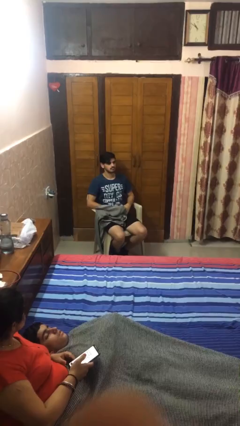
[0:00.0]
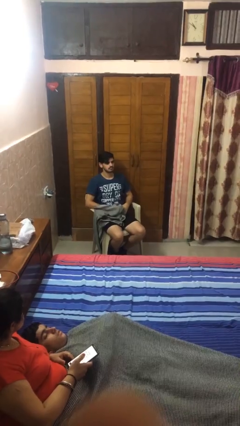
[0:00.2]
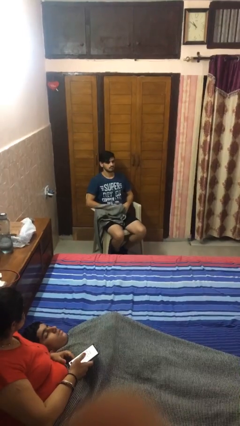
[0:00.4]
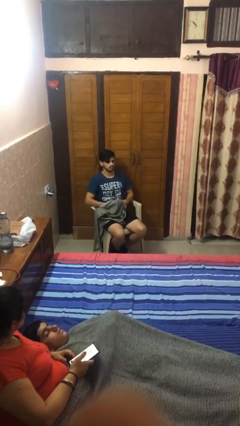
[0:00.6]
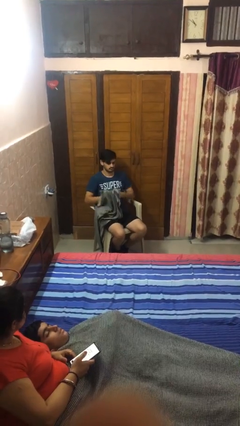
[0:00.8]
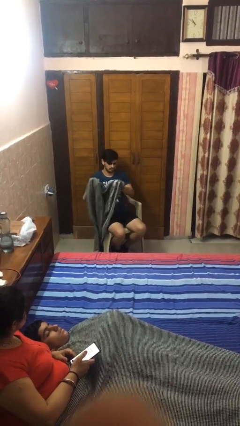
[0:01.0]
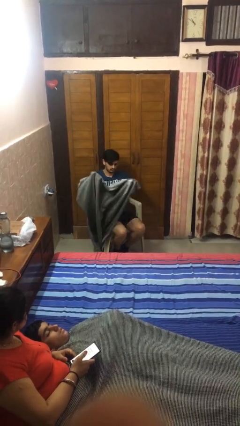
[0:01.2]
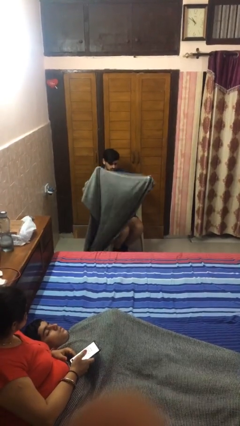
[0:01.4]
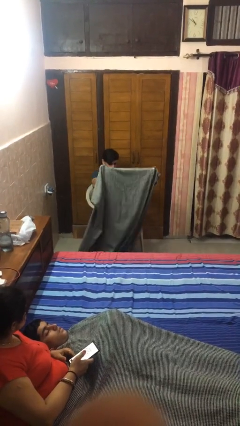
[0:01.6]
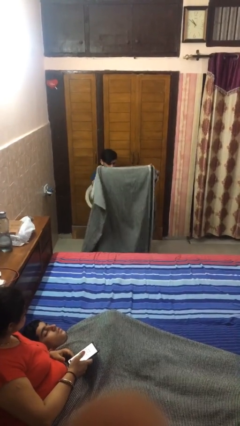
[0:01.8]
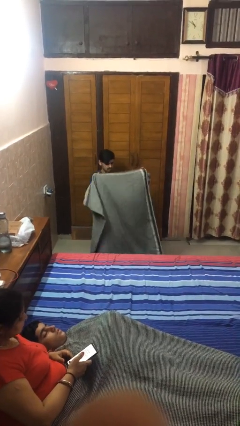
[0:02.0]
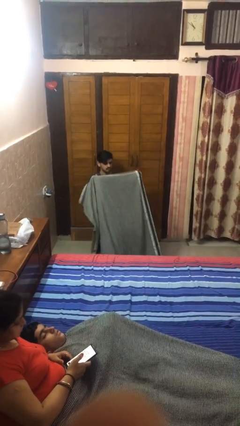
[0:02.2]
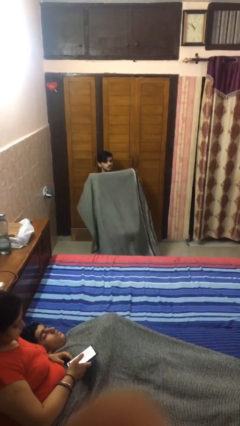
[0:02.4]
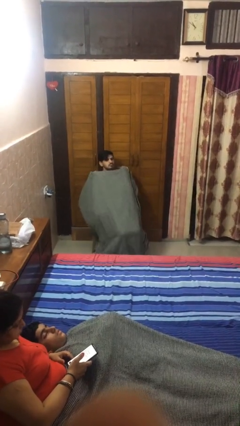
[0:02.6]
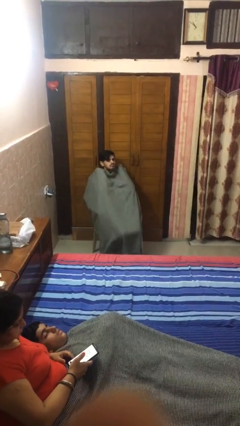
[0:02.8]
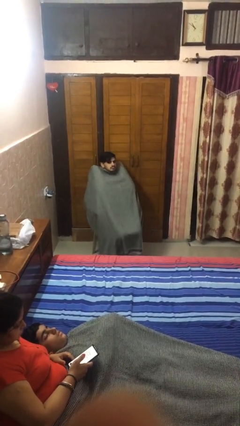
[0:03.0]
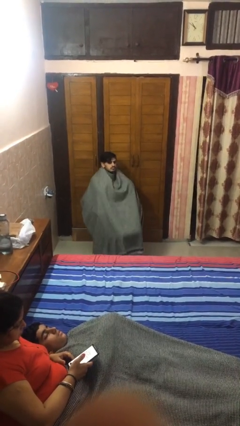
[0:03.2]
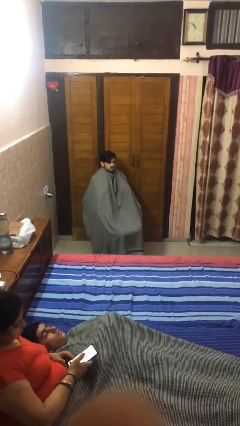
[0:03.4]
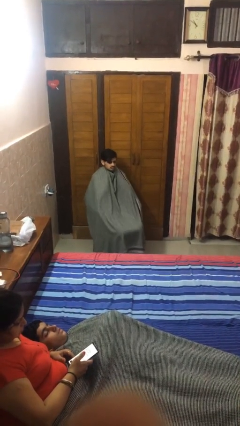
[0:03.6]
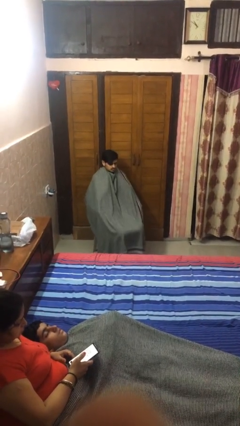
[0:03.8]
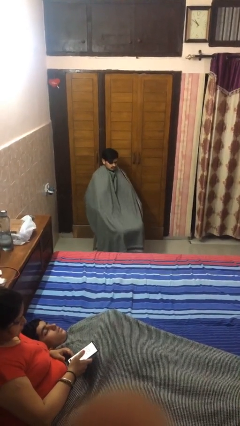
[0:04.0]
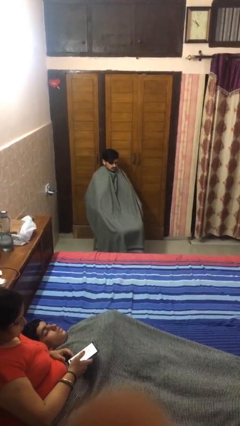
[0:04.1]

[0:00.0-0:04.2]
person covers with blanket

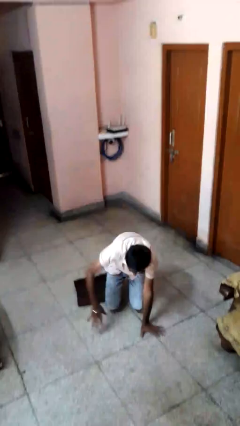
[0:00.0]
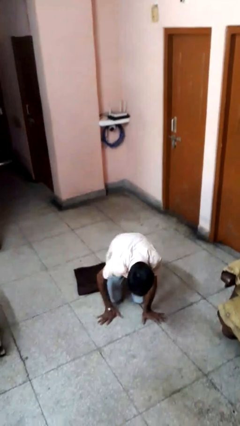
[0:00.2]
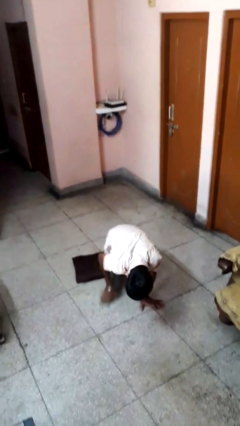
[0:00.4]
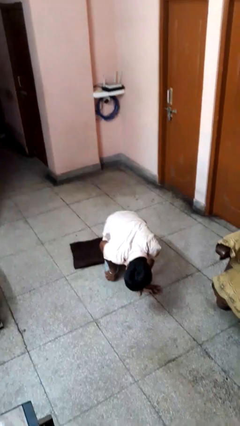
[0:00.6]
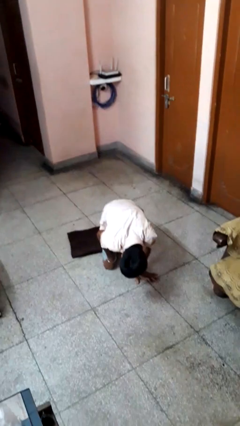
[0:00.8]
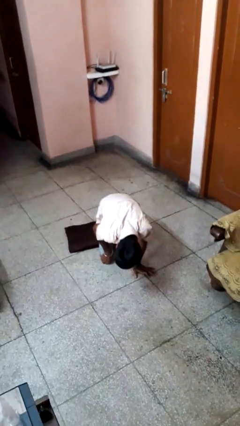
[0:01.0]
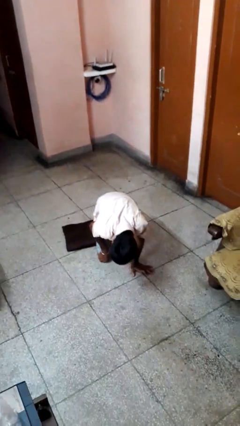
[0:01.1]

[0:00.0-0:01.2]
person trips on object on floor

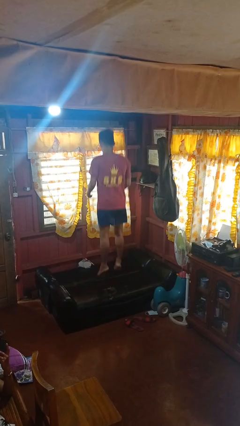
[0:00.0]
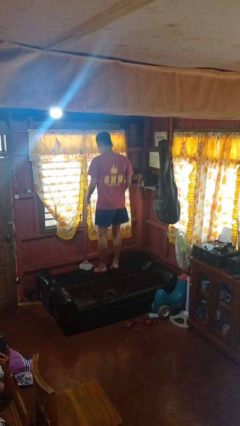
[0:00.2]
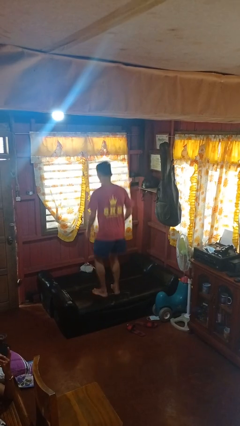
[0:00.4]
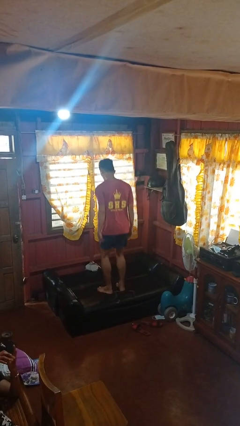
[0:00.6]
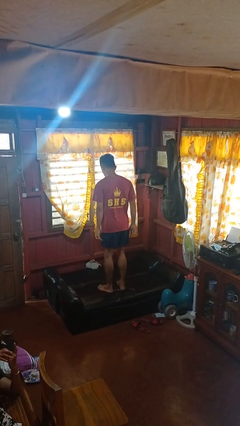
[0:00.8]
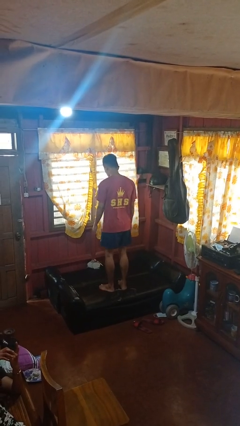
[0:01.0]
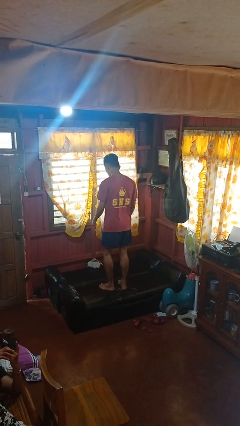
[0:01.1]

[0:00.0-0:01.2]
person jumps on couch

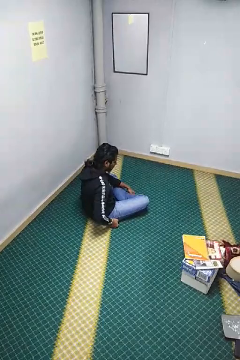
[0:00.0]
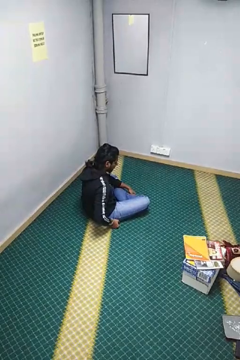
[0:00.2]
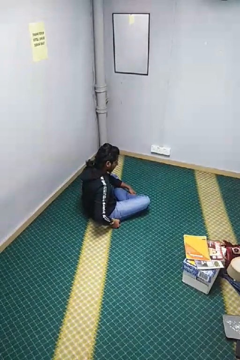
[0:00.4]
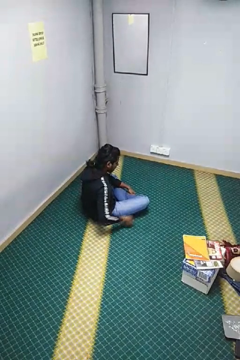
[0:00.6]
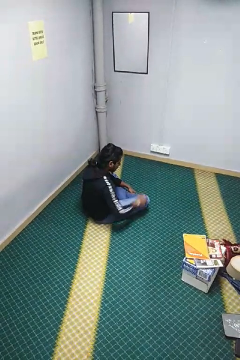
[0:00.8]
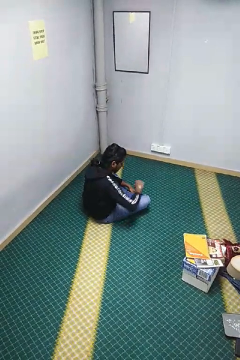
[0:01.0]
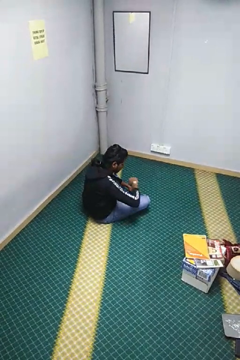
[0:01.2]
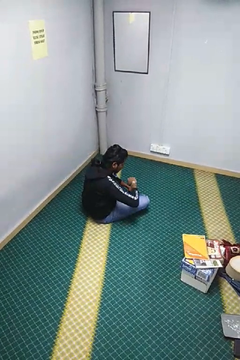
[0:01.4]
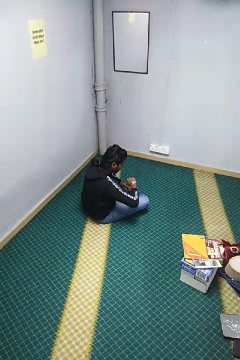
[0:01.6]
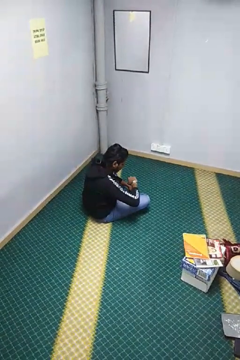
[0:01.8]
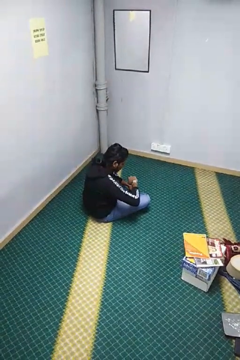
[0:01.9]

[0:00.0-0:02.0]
person looks at wristwatch

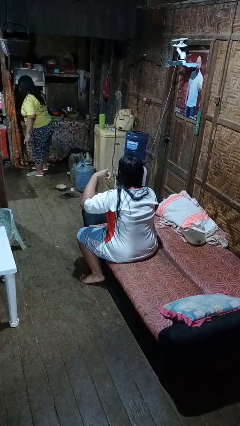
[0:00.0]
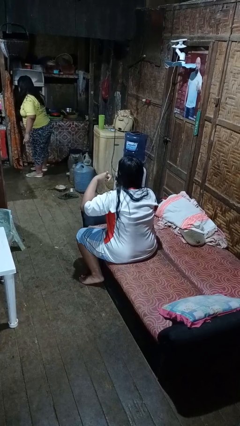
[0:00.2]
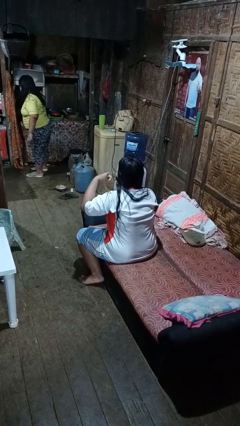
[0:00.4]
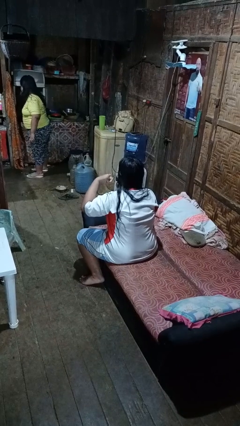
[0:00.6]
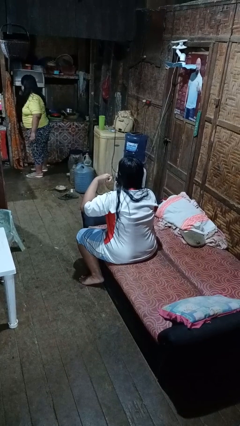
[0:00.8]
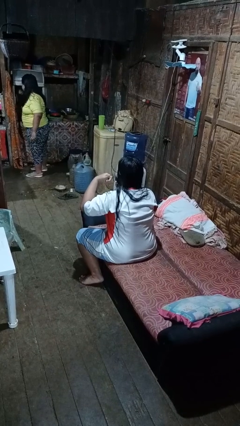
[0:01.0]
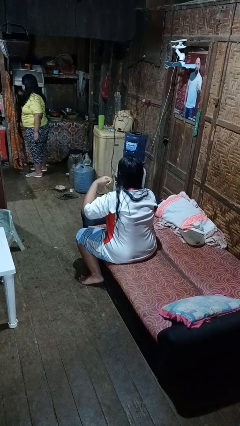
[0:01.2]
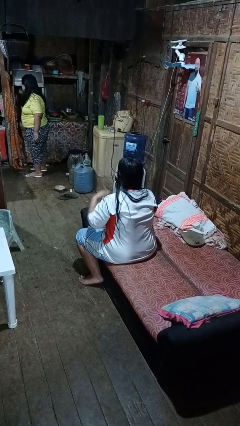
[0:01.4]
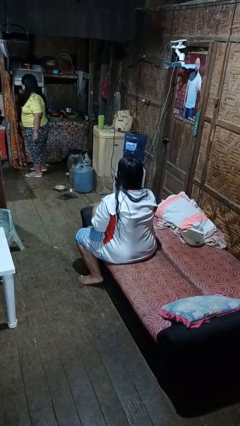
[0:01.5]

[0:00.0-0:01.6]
person gestures call me

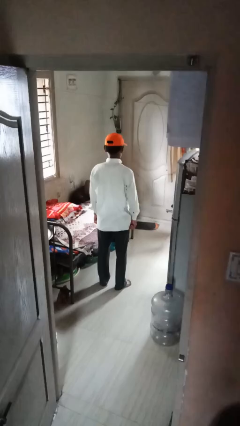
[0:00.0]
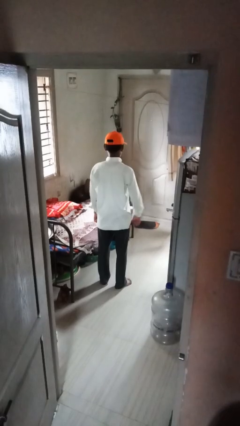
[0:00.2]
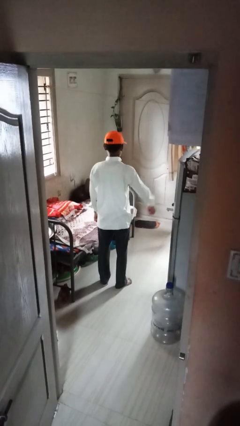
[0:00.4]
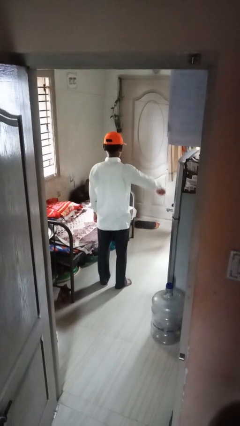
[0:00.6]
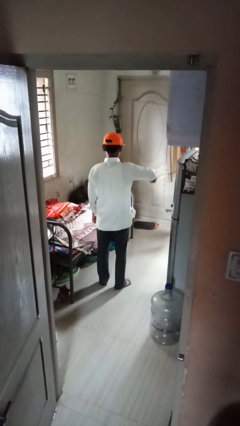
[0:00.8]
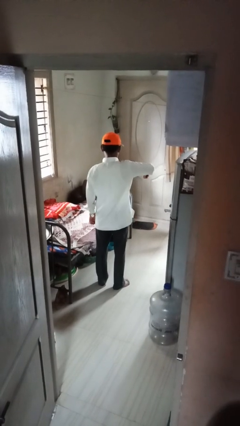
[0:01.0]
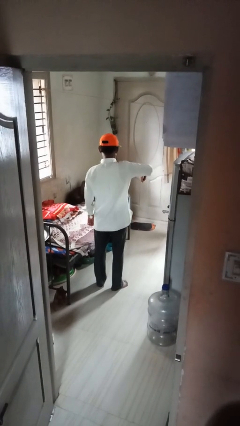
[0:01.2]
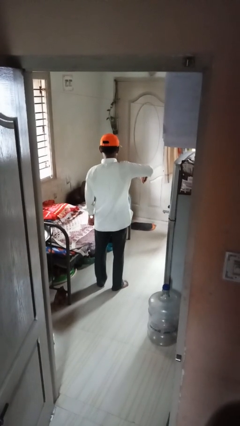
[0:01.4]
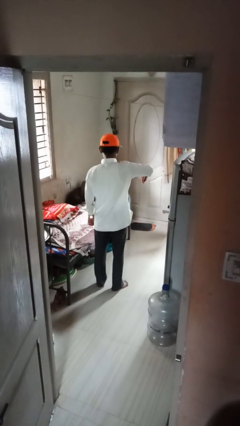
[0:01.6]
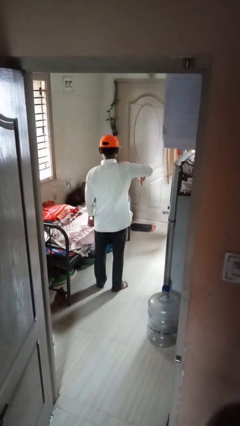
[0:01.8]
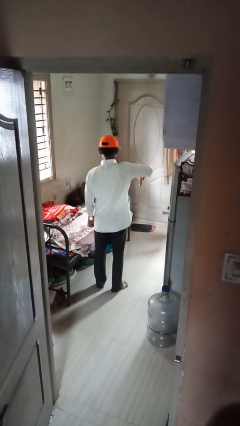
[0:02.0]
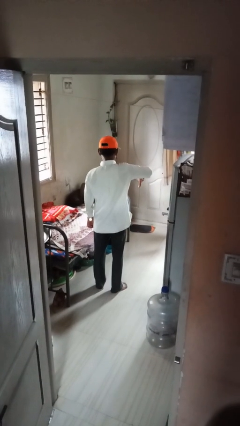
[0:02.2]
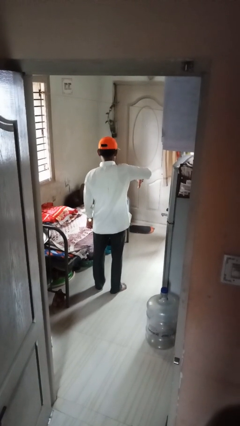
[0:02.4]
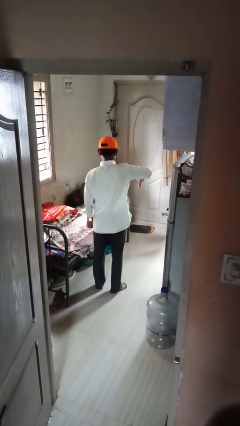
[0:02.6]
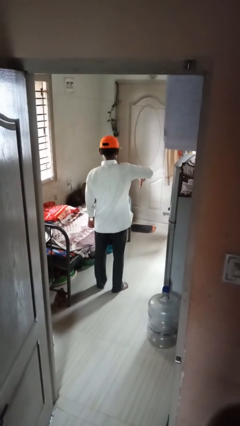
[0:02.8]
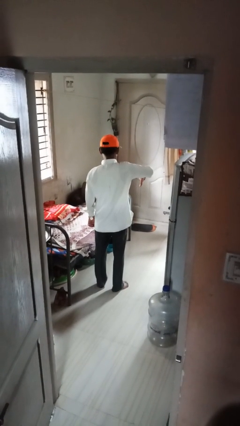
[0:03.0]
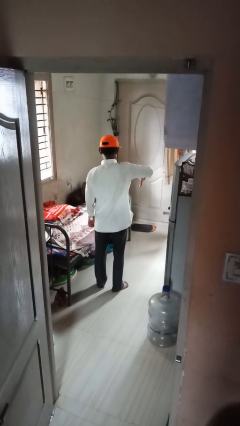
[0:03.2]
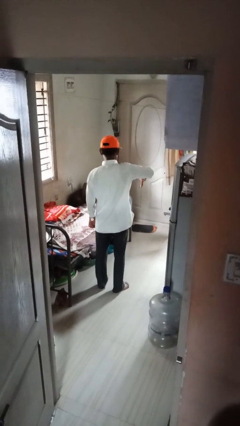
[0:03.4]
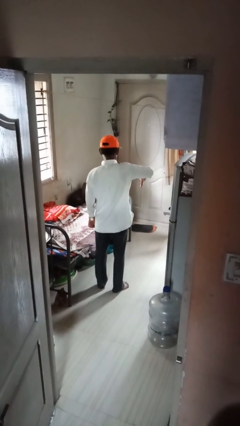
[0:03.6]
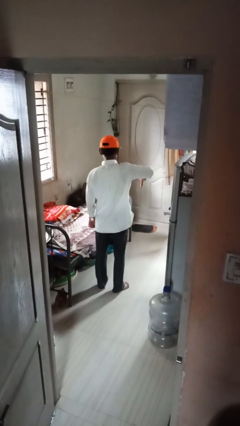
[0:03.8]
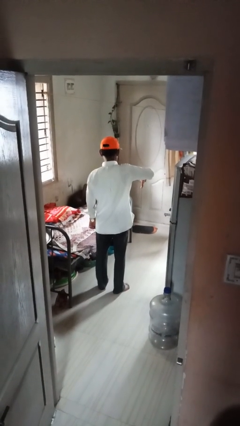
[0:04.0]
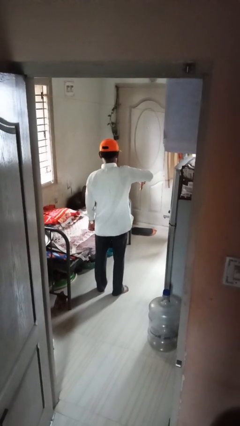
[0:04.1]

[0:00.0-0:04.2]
person gestures thumbs down

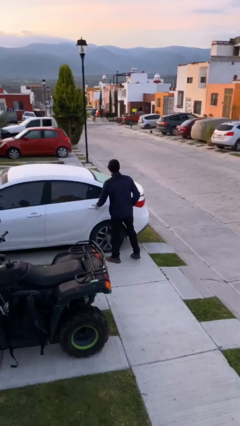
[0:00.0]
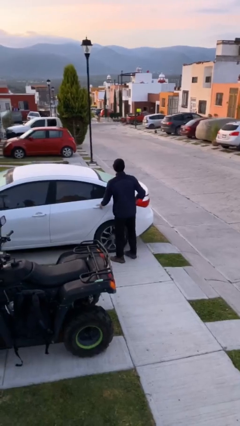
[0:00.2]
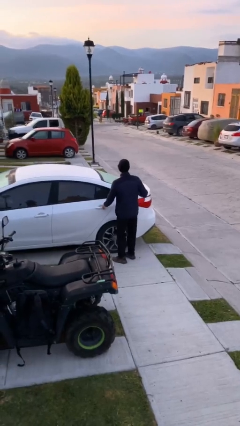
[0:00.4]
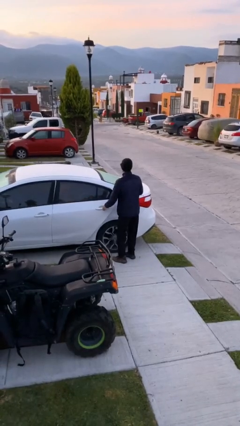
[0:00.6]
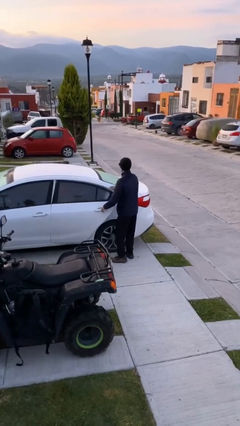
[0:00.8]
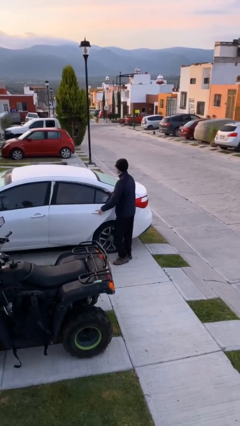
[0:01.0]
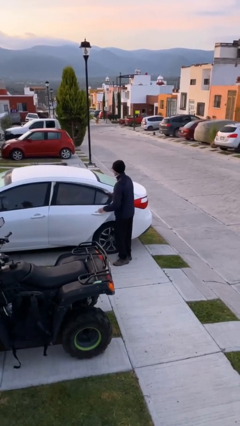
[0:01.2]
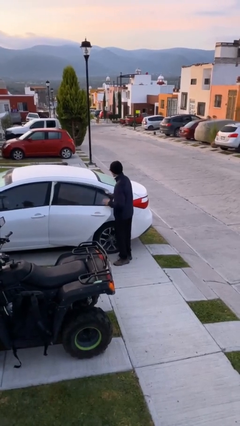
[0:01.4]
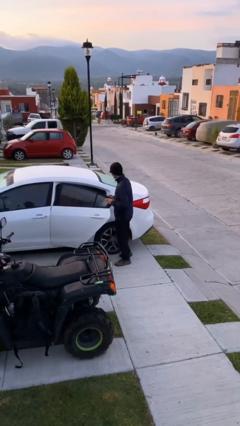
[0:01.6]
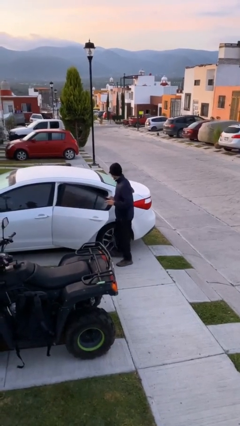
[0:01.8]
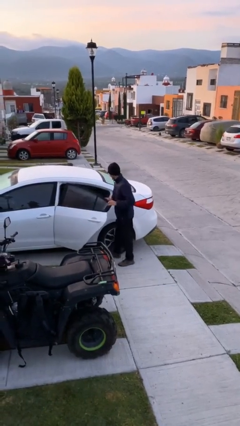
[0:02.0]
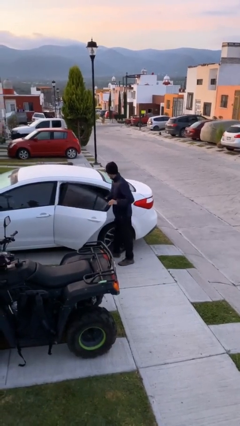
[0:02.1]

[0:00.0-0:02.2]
person opens car door

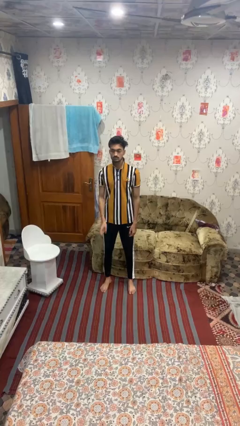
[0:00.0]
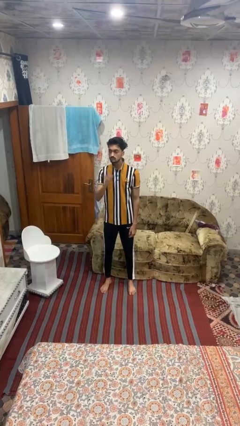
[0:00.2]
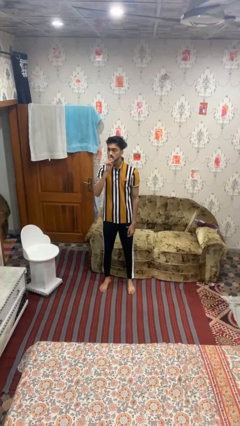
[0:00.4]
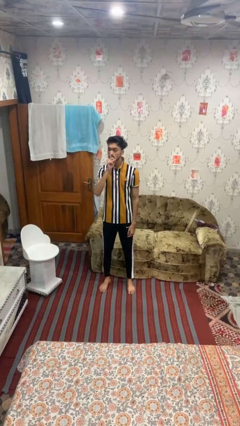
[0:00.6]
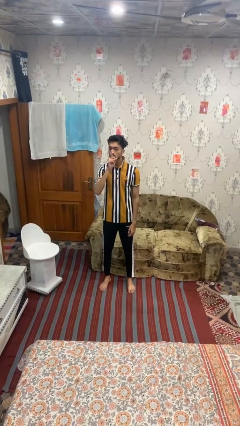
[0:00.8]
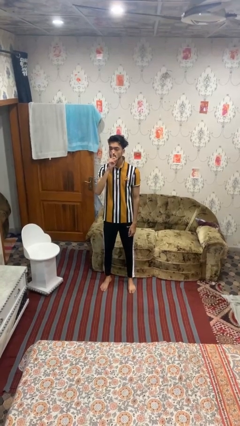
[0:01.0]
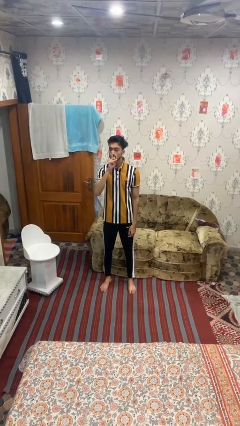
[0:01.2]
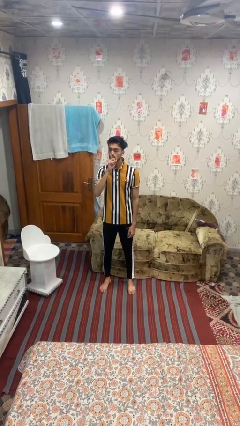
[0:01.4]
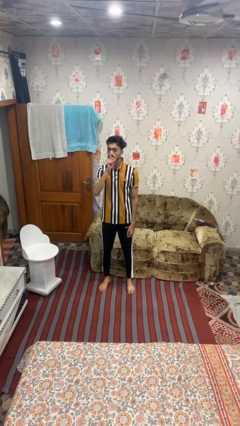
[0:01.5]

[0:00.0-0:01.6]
person gestures be quiet
